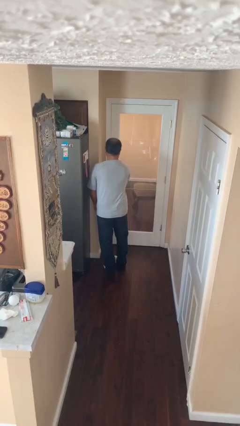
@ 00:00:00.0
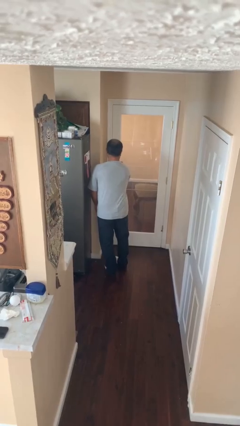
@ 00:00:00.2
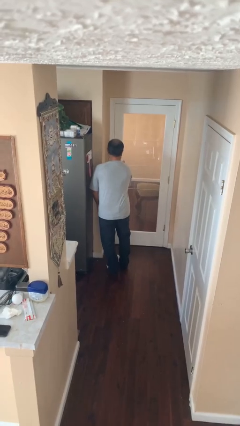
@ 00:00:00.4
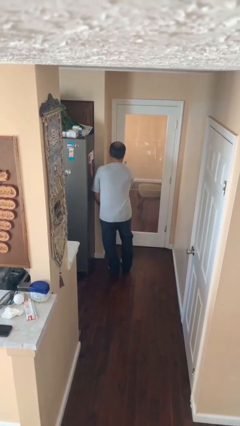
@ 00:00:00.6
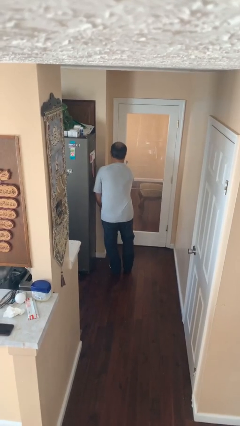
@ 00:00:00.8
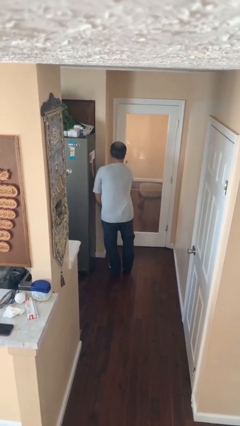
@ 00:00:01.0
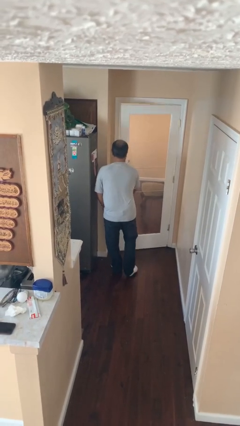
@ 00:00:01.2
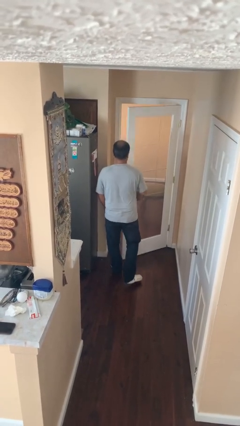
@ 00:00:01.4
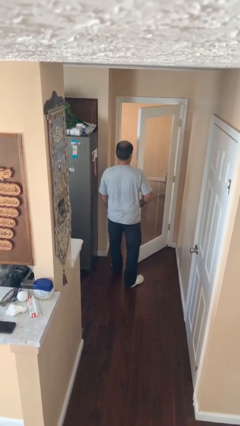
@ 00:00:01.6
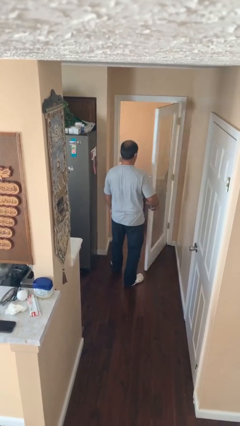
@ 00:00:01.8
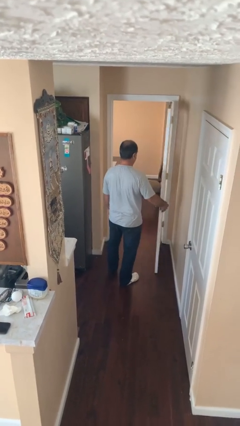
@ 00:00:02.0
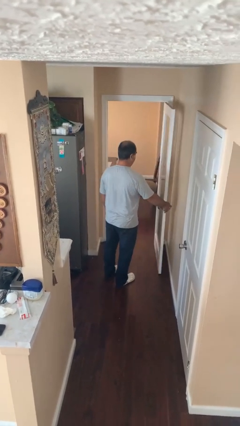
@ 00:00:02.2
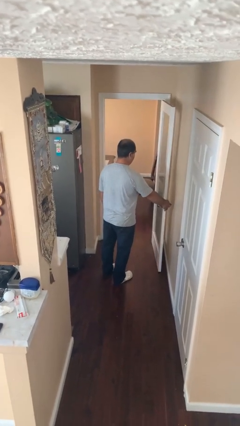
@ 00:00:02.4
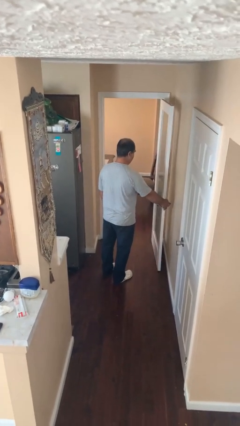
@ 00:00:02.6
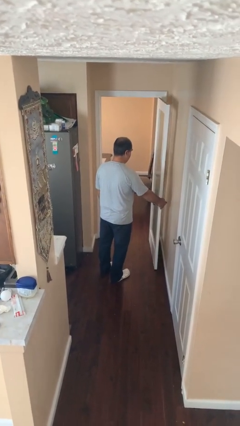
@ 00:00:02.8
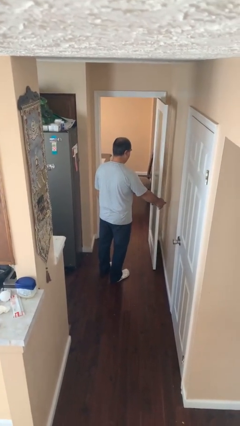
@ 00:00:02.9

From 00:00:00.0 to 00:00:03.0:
person opens facility door

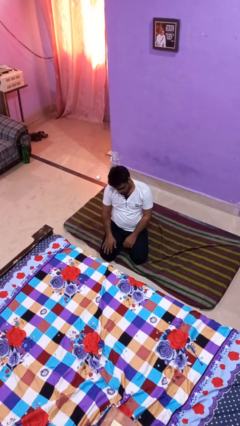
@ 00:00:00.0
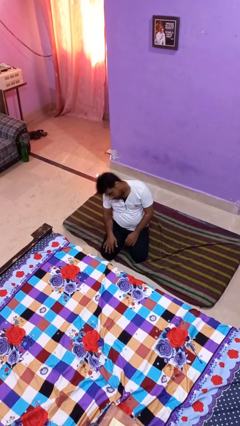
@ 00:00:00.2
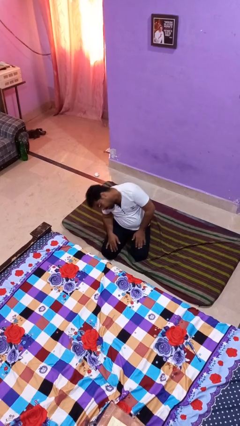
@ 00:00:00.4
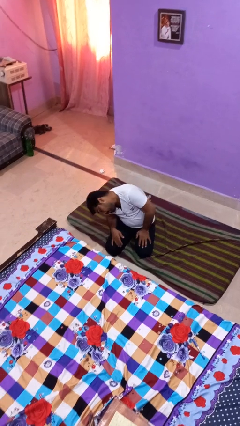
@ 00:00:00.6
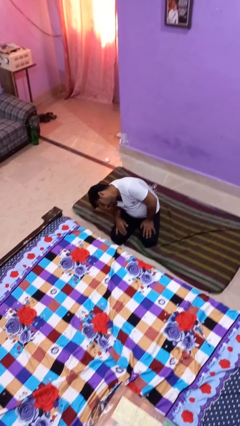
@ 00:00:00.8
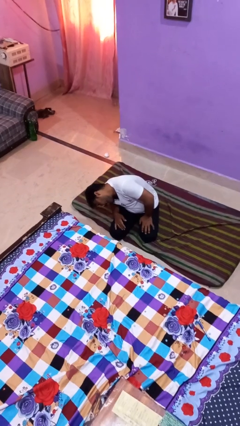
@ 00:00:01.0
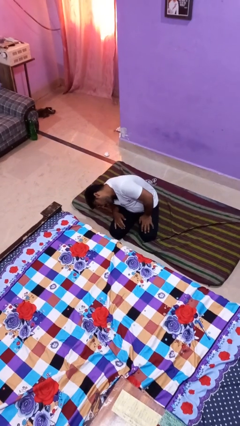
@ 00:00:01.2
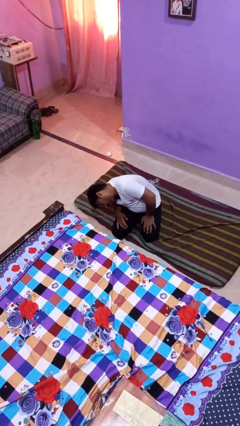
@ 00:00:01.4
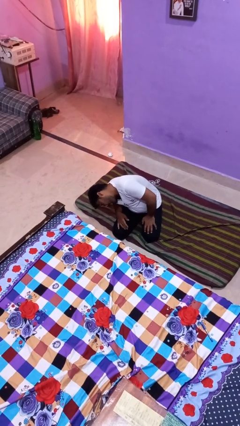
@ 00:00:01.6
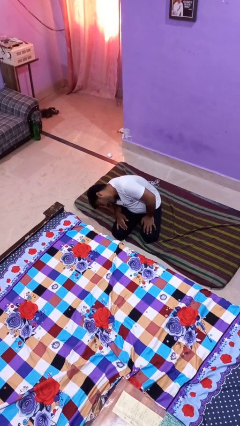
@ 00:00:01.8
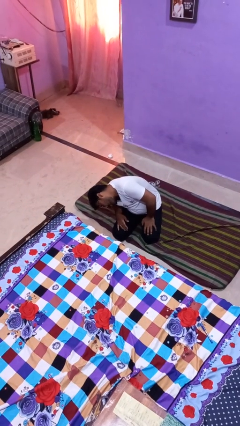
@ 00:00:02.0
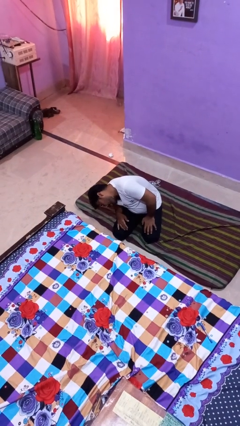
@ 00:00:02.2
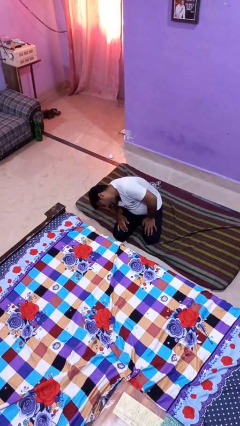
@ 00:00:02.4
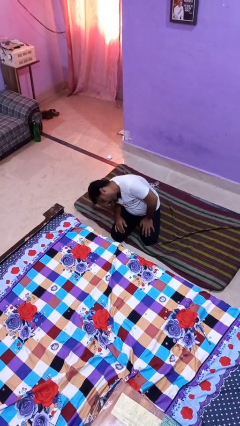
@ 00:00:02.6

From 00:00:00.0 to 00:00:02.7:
person searches under bed

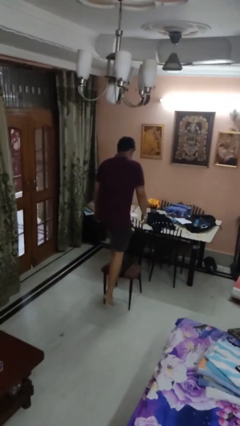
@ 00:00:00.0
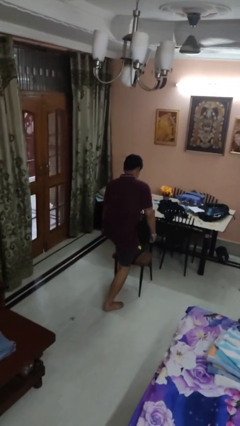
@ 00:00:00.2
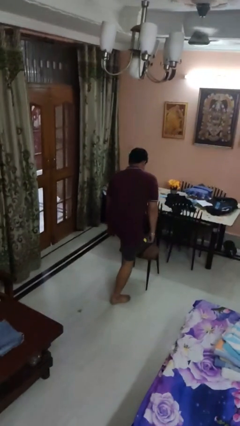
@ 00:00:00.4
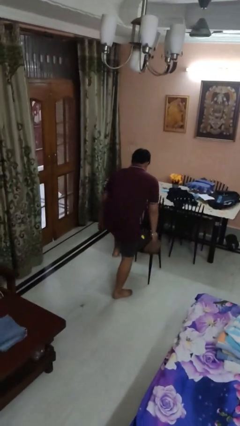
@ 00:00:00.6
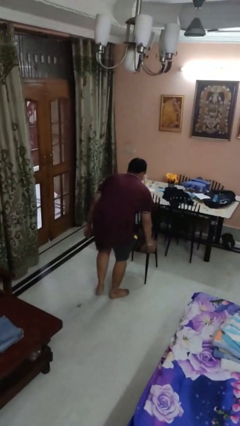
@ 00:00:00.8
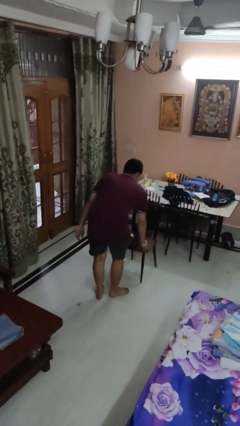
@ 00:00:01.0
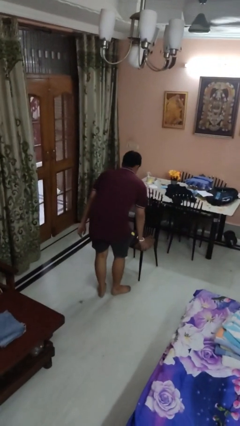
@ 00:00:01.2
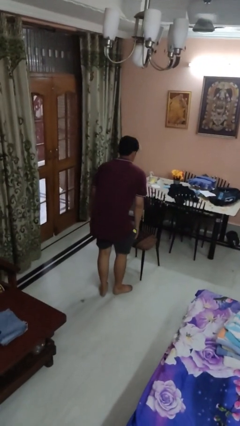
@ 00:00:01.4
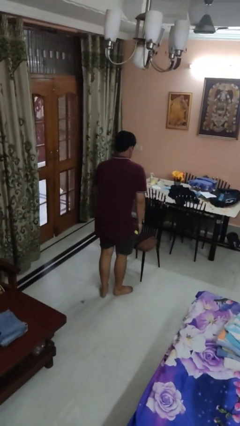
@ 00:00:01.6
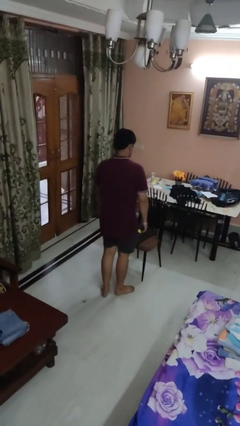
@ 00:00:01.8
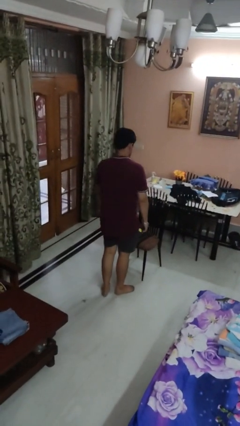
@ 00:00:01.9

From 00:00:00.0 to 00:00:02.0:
person climbs off chair

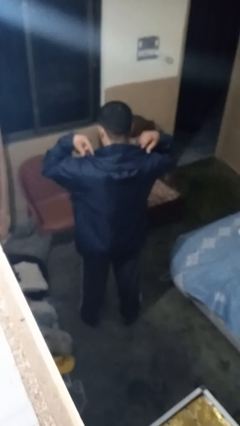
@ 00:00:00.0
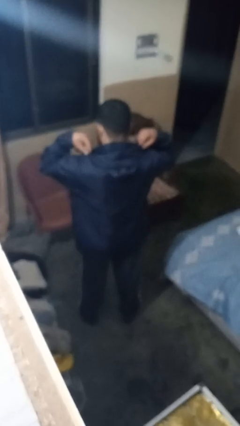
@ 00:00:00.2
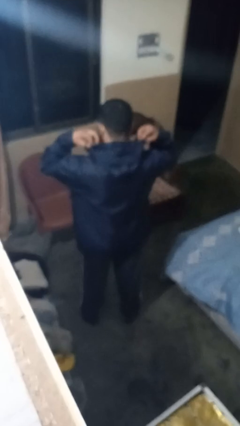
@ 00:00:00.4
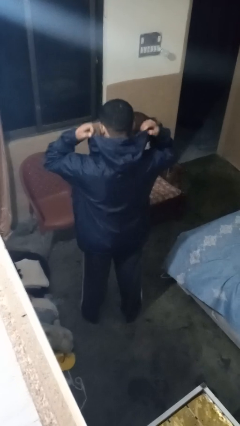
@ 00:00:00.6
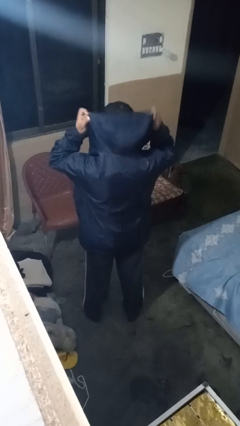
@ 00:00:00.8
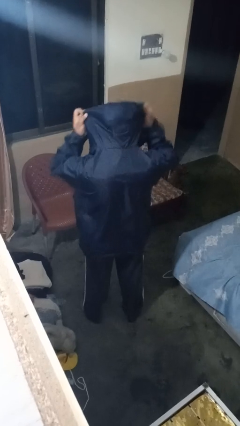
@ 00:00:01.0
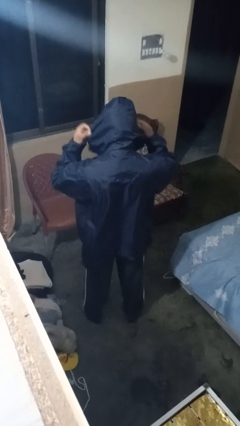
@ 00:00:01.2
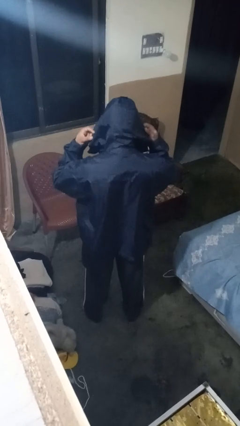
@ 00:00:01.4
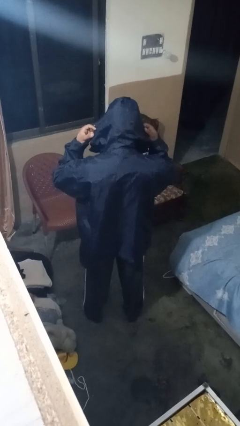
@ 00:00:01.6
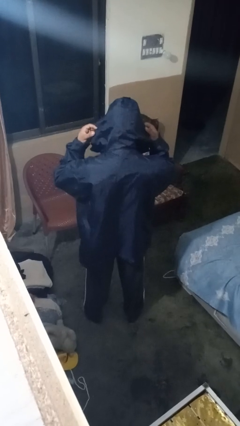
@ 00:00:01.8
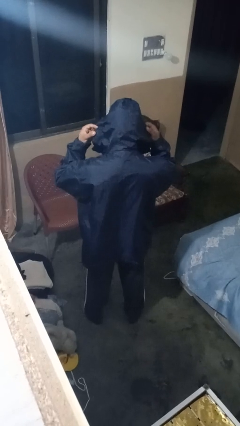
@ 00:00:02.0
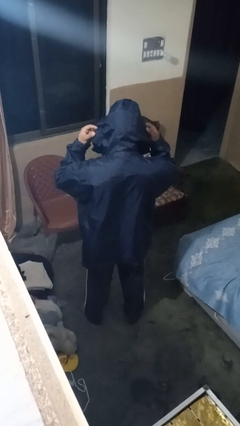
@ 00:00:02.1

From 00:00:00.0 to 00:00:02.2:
person puts on hoodie

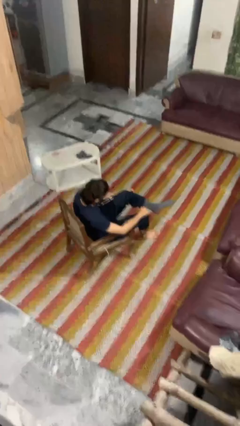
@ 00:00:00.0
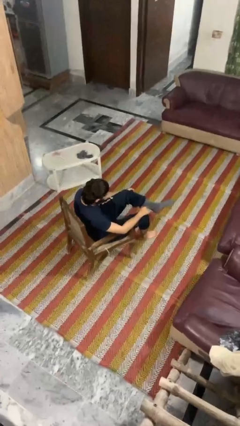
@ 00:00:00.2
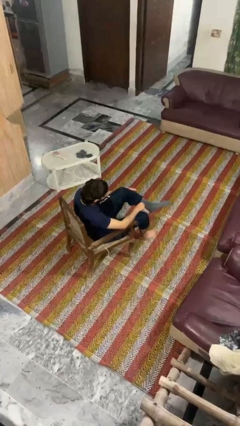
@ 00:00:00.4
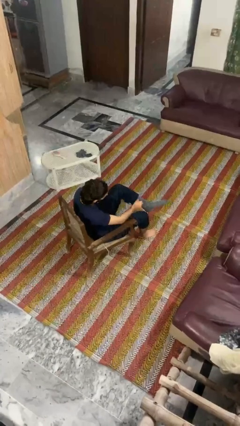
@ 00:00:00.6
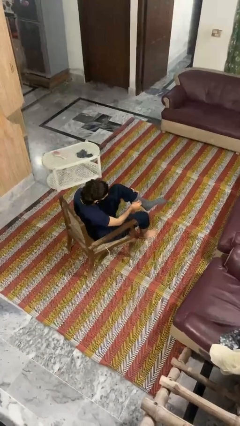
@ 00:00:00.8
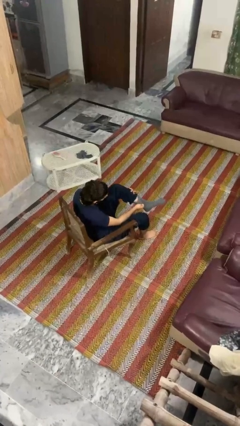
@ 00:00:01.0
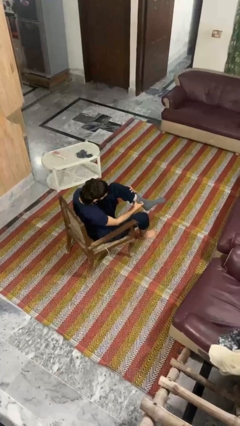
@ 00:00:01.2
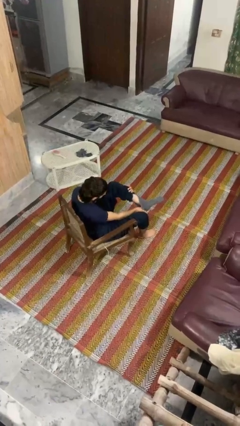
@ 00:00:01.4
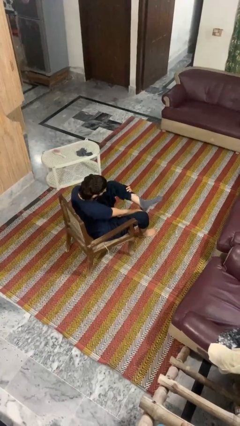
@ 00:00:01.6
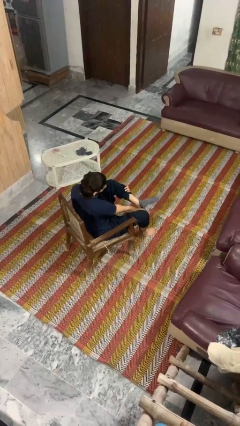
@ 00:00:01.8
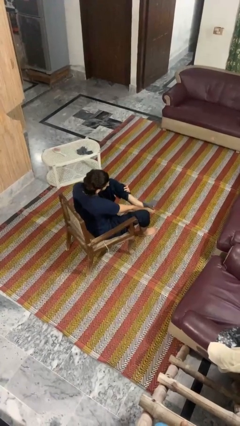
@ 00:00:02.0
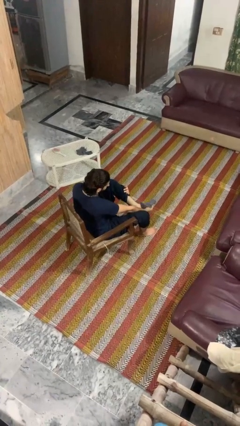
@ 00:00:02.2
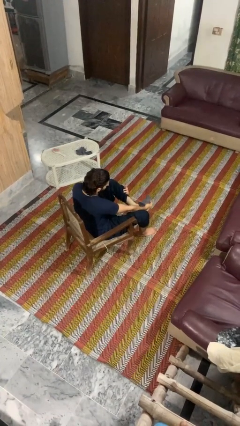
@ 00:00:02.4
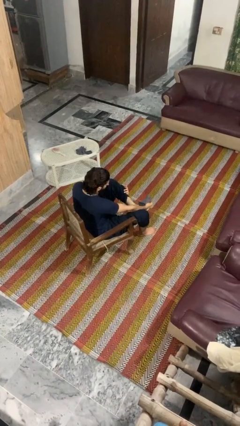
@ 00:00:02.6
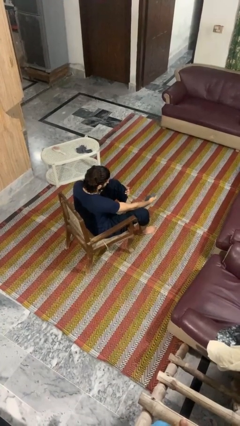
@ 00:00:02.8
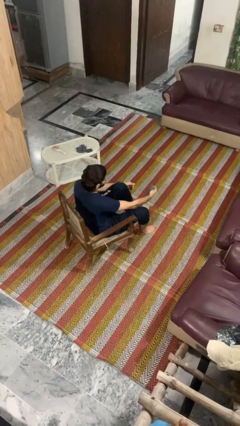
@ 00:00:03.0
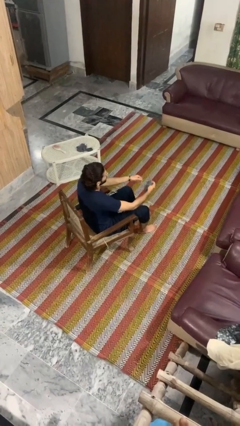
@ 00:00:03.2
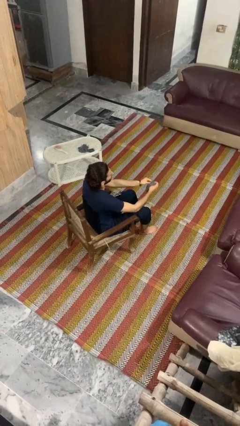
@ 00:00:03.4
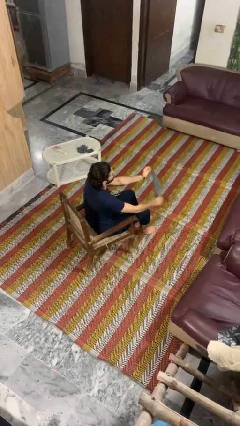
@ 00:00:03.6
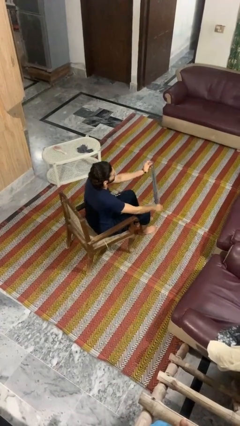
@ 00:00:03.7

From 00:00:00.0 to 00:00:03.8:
person takes off socks

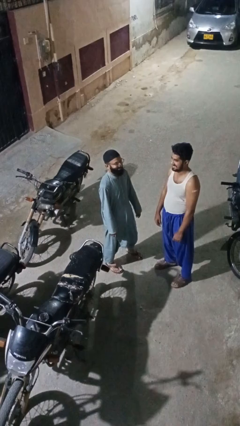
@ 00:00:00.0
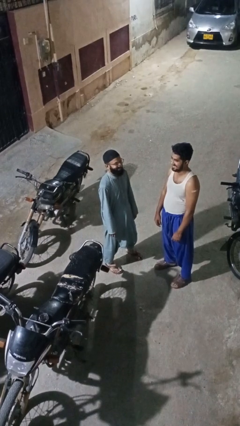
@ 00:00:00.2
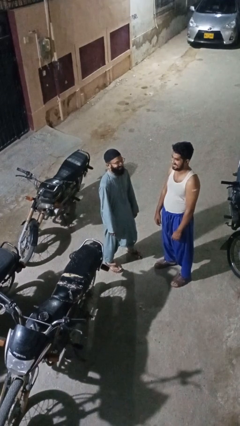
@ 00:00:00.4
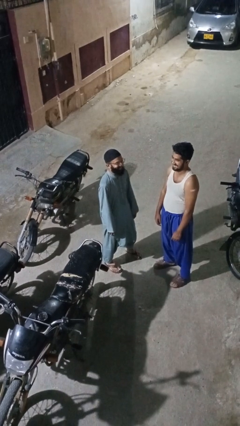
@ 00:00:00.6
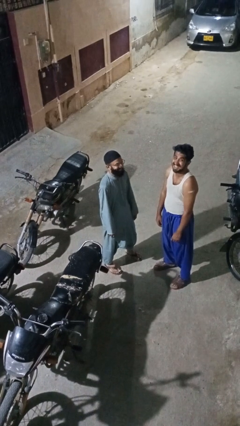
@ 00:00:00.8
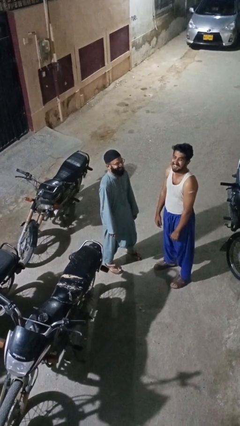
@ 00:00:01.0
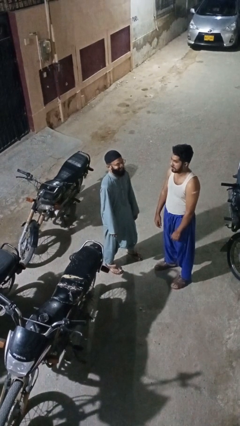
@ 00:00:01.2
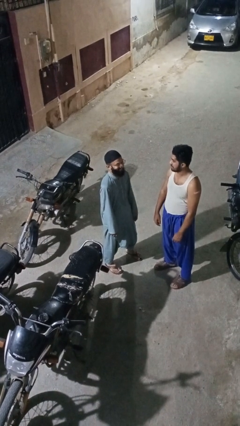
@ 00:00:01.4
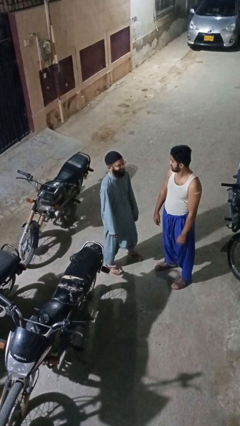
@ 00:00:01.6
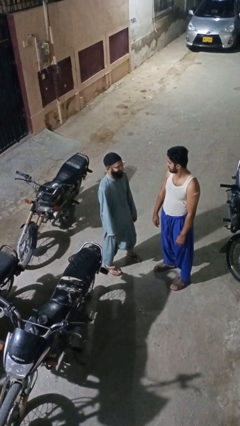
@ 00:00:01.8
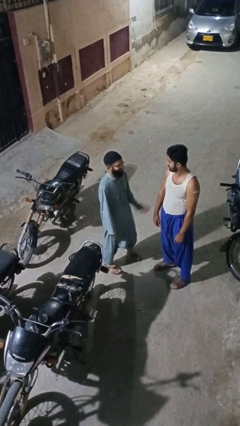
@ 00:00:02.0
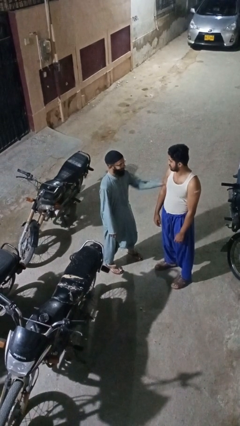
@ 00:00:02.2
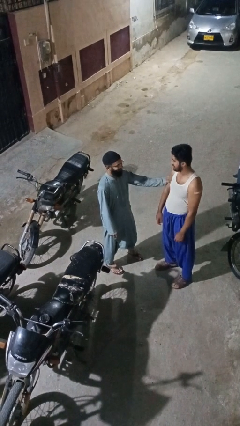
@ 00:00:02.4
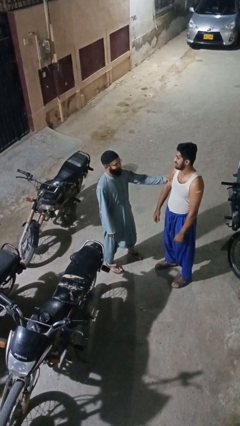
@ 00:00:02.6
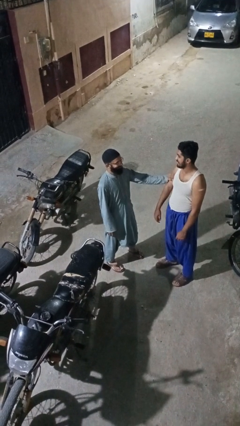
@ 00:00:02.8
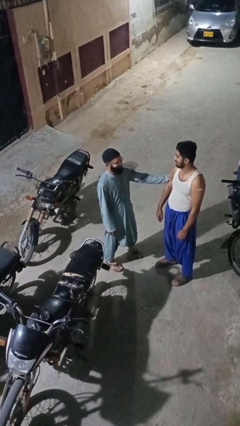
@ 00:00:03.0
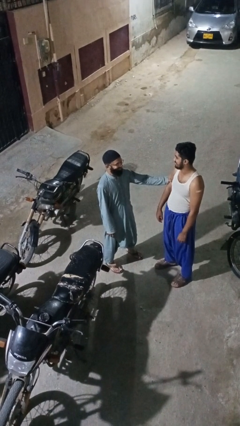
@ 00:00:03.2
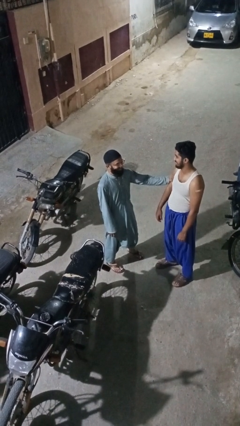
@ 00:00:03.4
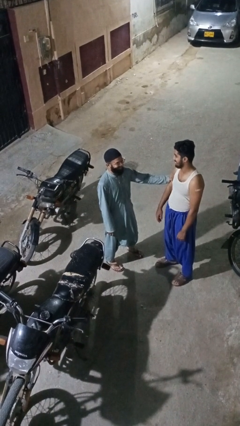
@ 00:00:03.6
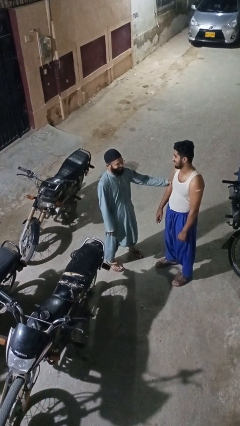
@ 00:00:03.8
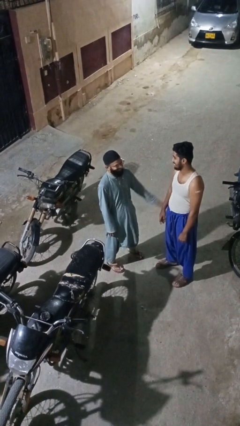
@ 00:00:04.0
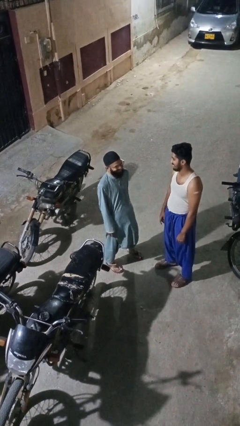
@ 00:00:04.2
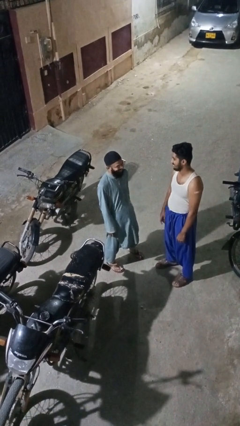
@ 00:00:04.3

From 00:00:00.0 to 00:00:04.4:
person grabs person by bicep
